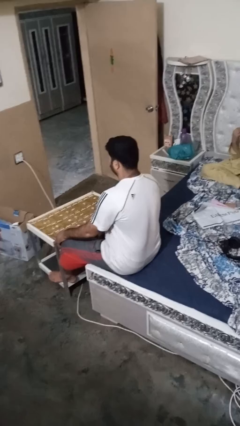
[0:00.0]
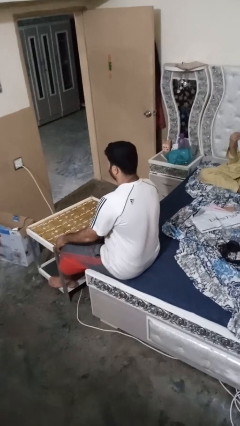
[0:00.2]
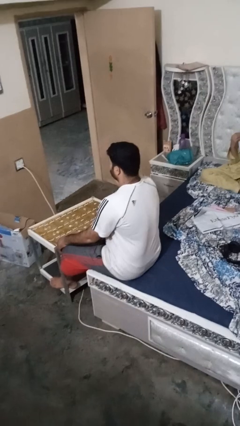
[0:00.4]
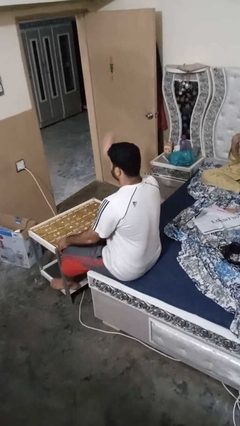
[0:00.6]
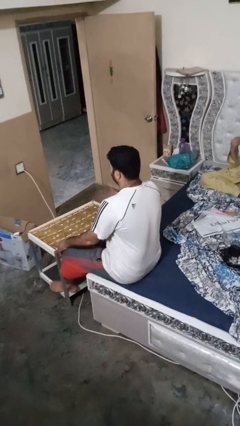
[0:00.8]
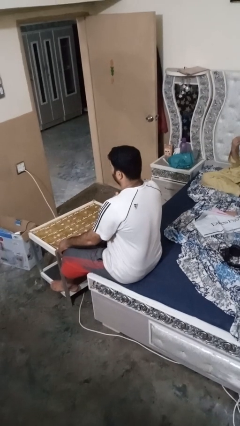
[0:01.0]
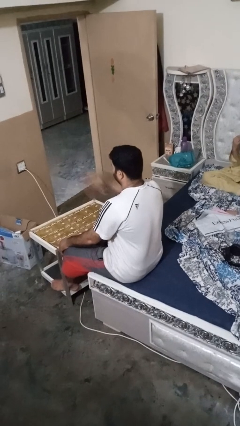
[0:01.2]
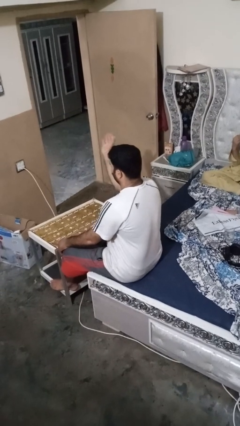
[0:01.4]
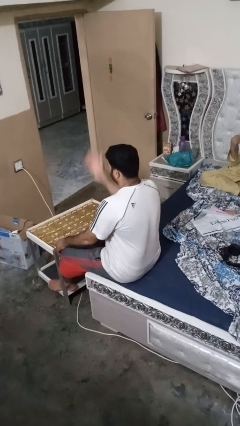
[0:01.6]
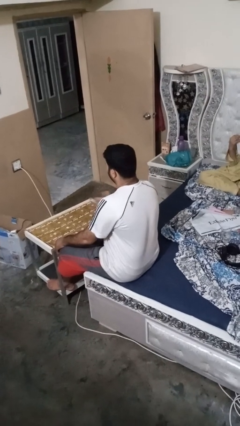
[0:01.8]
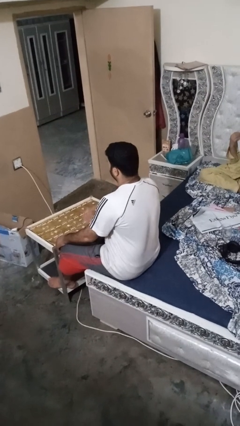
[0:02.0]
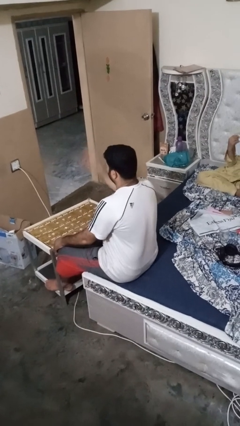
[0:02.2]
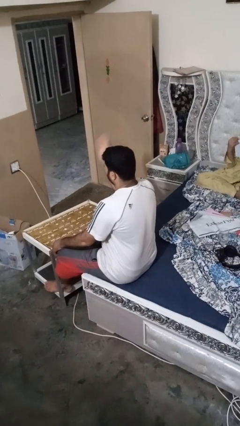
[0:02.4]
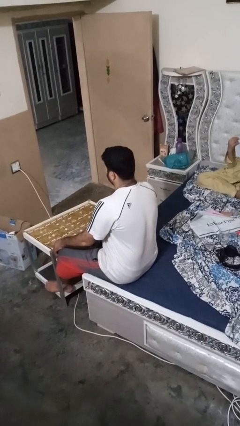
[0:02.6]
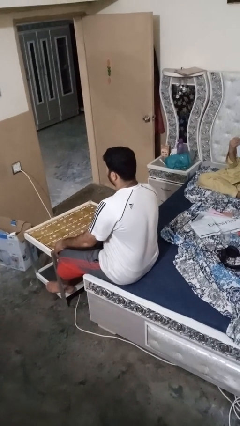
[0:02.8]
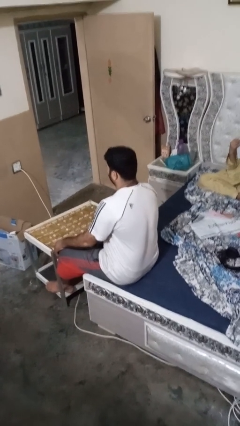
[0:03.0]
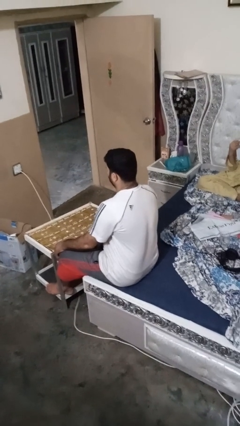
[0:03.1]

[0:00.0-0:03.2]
person drums on chest

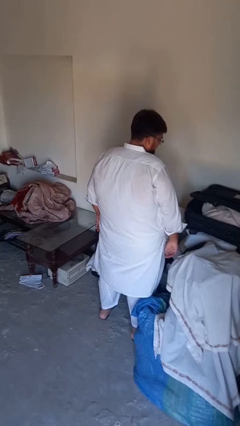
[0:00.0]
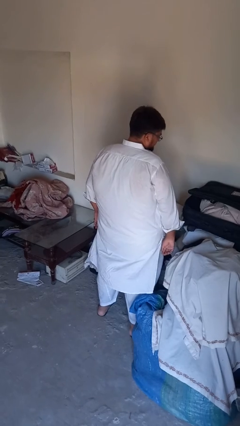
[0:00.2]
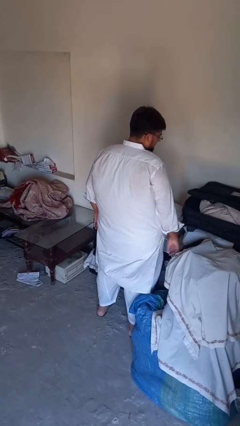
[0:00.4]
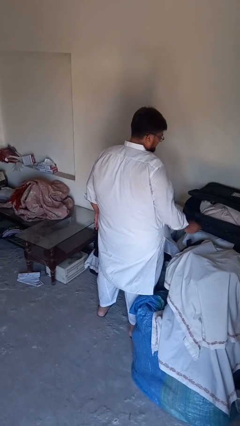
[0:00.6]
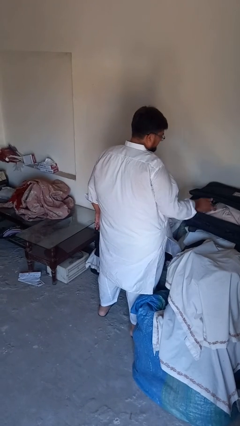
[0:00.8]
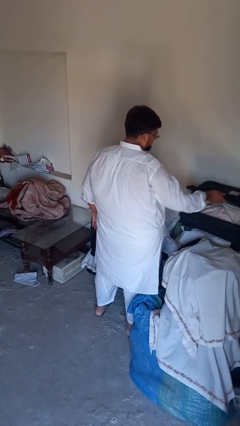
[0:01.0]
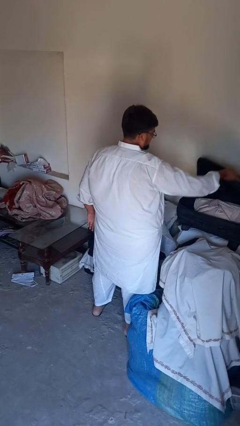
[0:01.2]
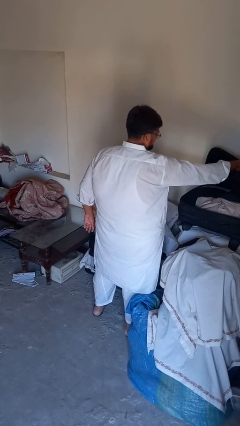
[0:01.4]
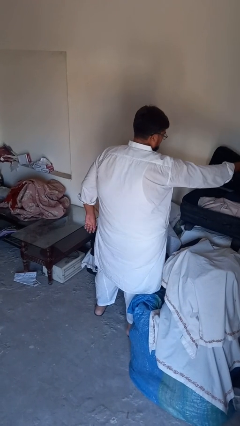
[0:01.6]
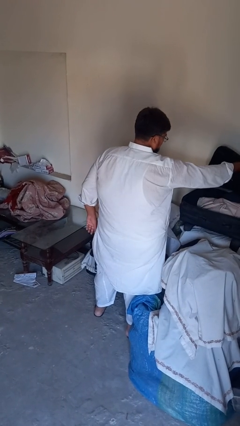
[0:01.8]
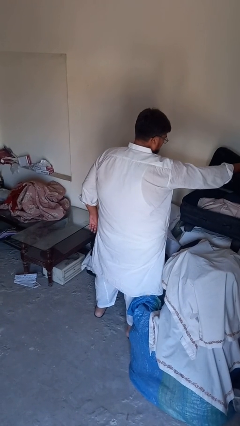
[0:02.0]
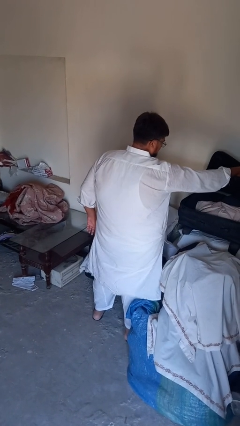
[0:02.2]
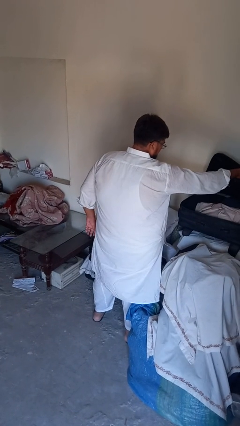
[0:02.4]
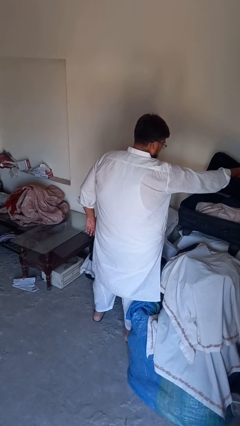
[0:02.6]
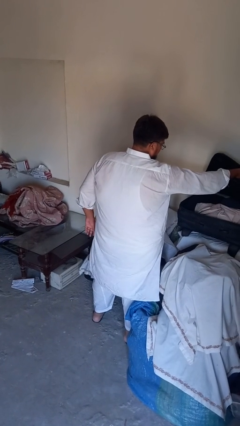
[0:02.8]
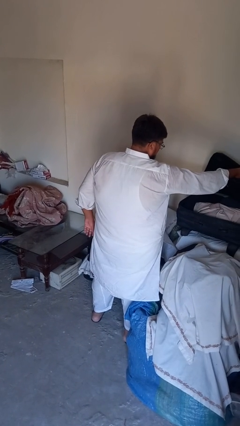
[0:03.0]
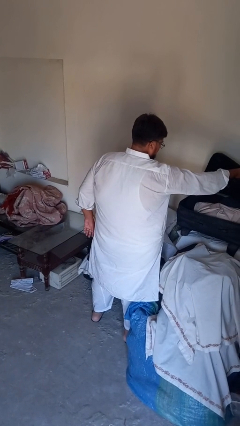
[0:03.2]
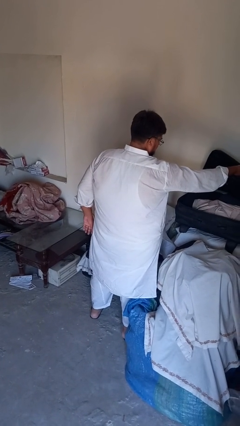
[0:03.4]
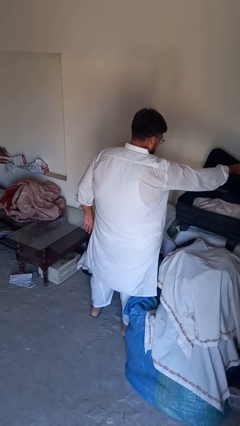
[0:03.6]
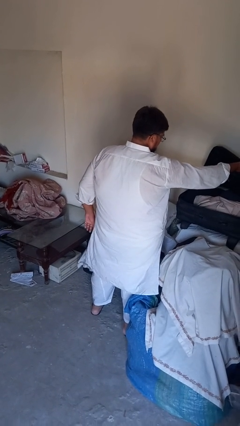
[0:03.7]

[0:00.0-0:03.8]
person opens suitcase

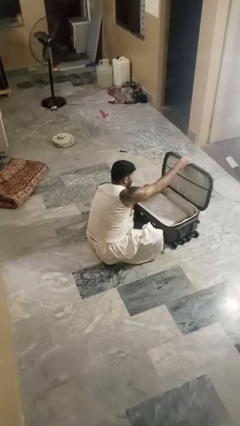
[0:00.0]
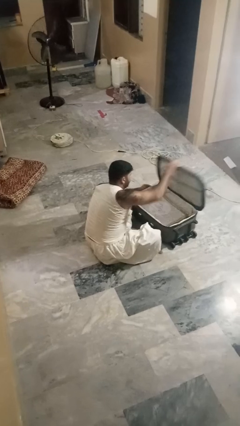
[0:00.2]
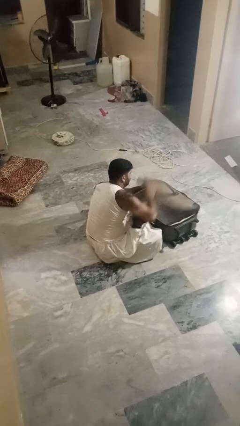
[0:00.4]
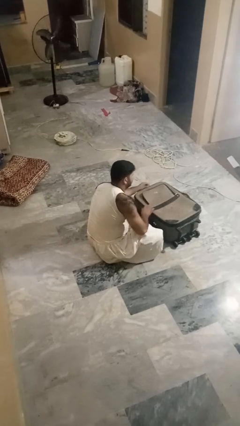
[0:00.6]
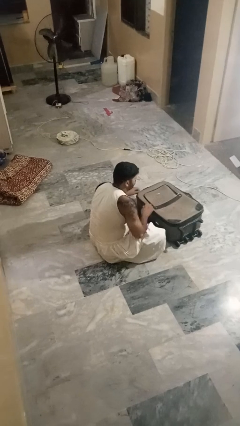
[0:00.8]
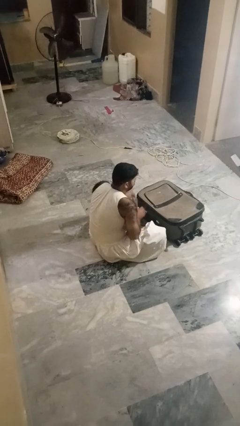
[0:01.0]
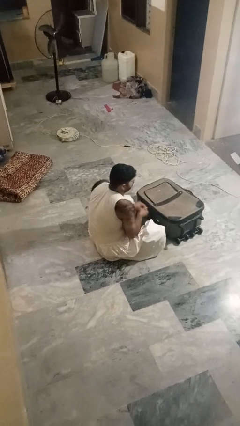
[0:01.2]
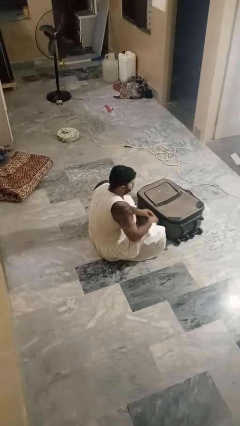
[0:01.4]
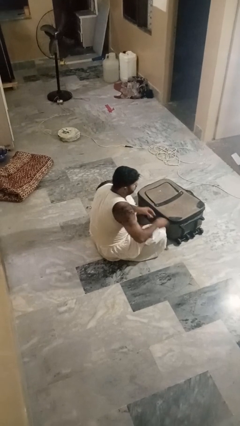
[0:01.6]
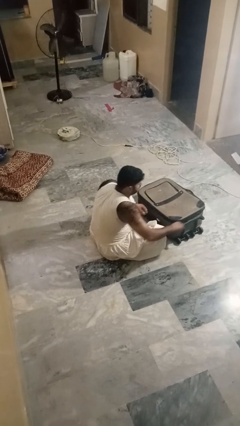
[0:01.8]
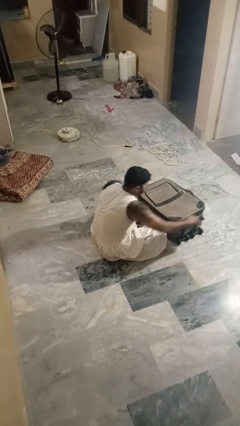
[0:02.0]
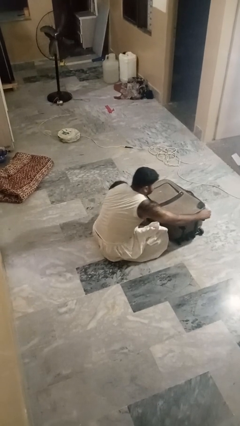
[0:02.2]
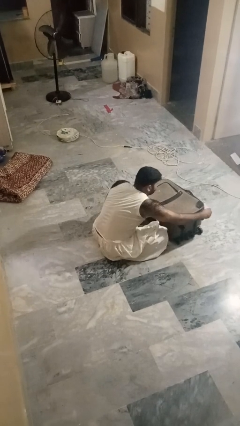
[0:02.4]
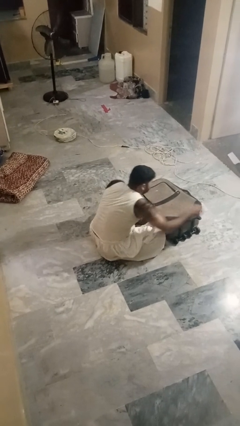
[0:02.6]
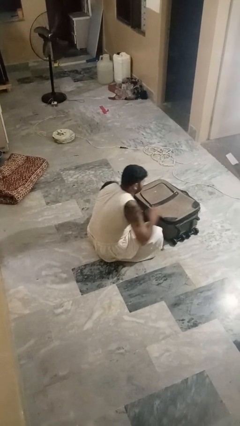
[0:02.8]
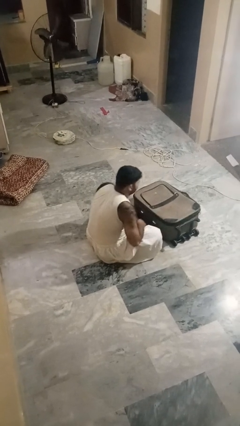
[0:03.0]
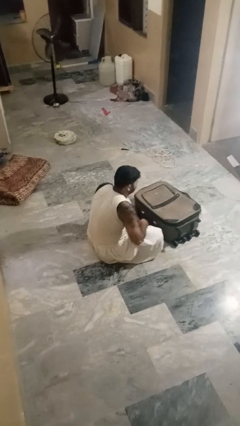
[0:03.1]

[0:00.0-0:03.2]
person closes suitcase

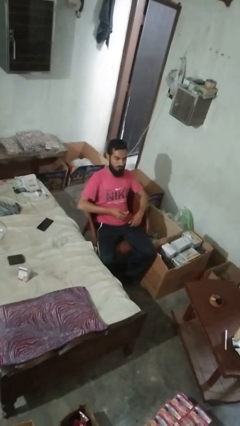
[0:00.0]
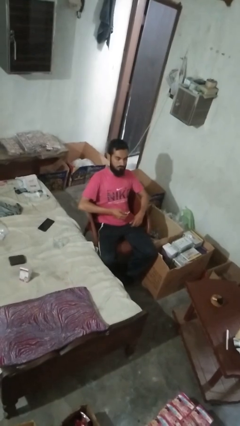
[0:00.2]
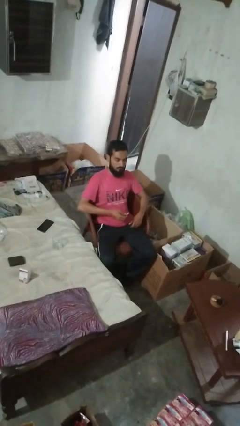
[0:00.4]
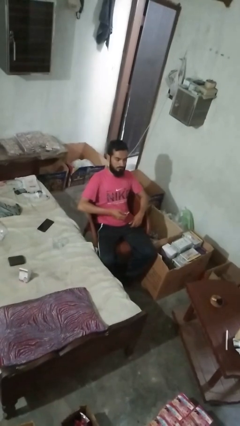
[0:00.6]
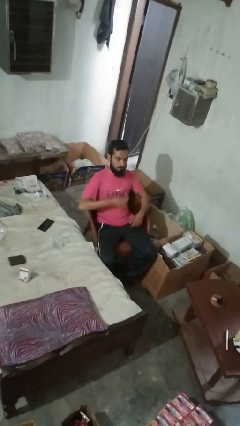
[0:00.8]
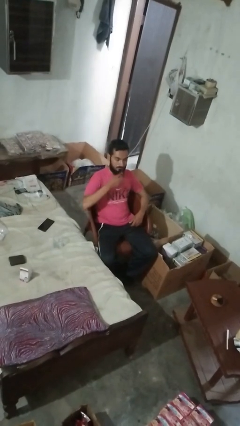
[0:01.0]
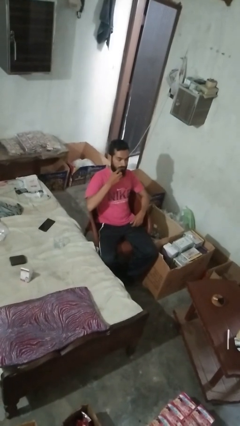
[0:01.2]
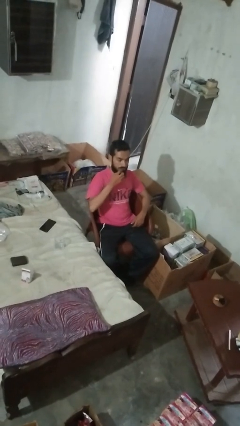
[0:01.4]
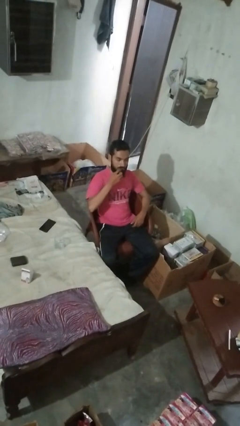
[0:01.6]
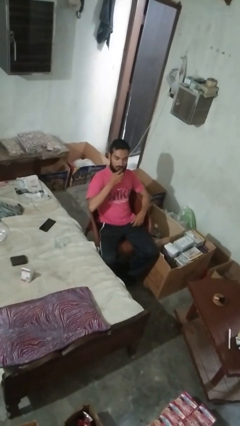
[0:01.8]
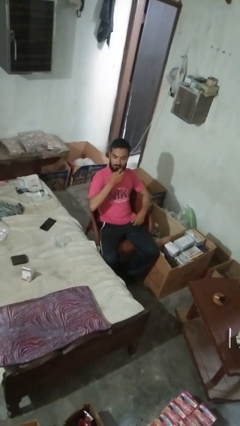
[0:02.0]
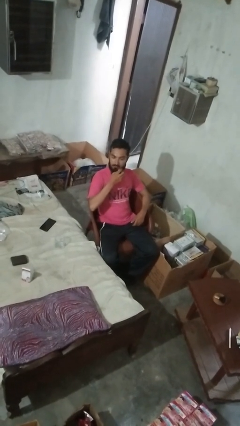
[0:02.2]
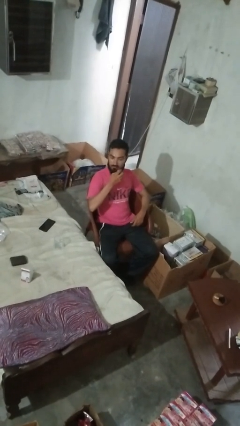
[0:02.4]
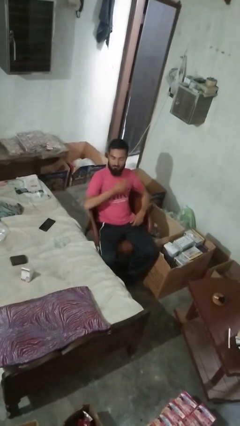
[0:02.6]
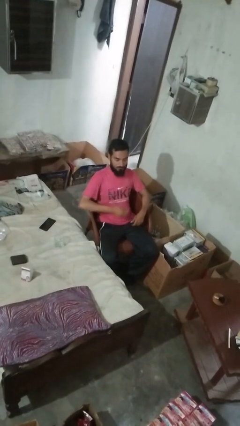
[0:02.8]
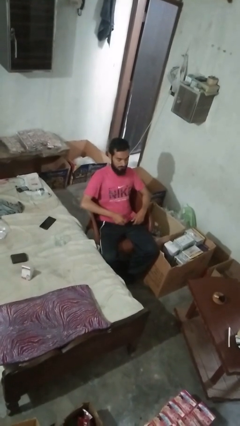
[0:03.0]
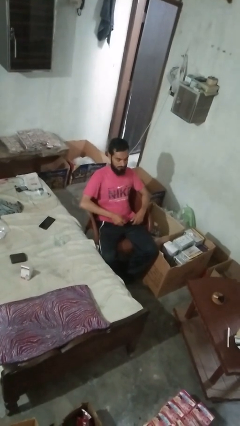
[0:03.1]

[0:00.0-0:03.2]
person applies lip makeup

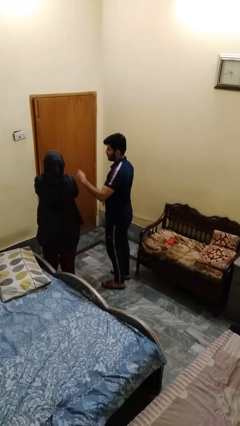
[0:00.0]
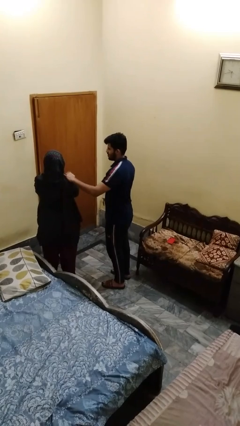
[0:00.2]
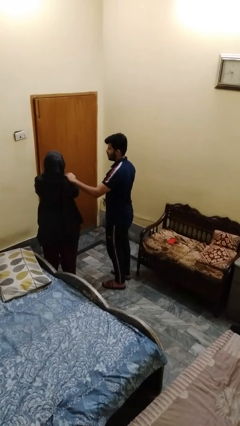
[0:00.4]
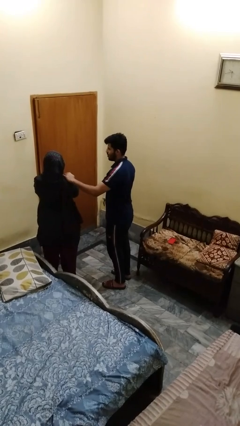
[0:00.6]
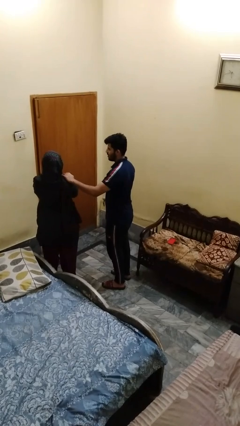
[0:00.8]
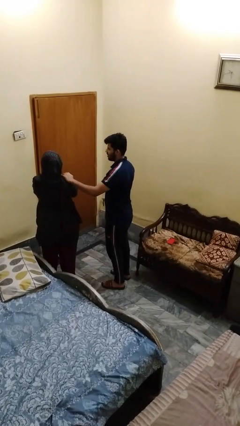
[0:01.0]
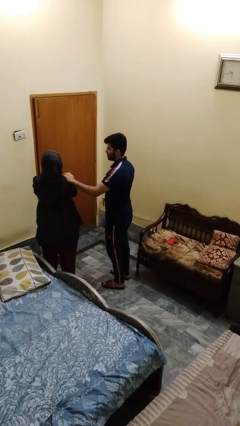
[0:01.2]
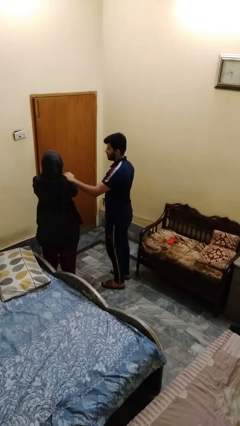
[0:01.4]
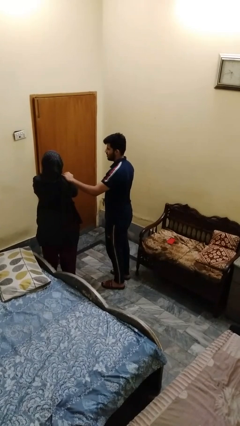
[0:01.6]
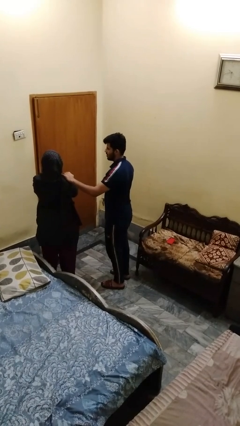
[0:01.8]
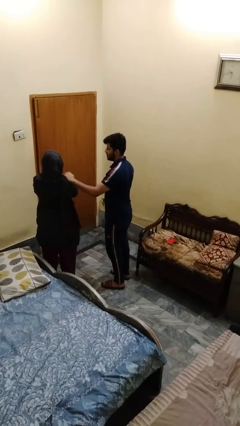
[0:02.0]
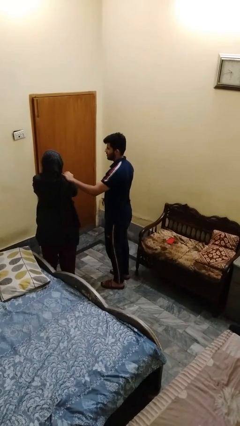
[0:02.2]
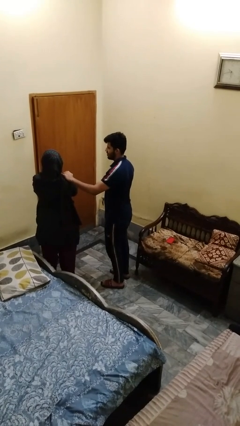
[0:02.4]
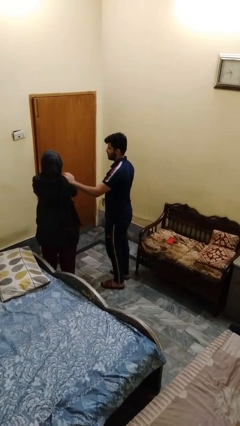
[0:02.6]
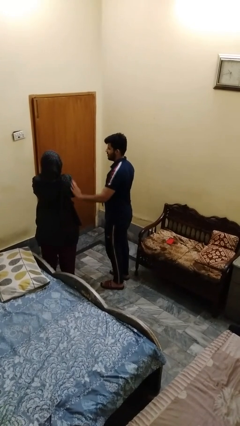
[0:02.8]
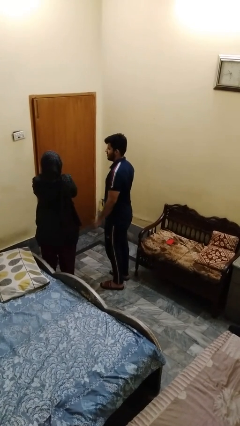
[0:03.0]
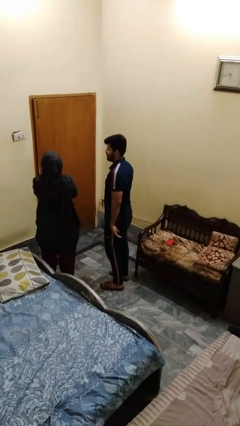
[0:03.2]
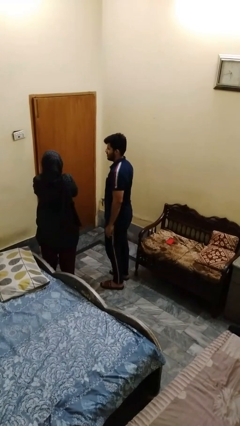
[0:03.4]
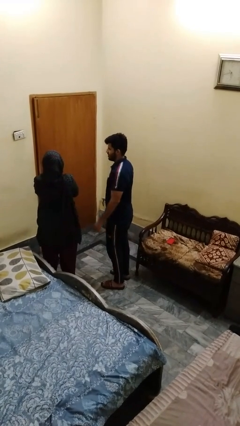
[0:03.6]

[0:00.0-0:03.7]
person pounds shoulders of person
